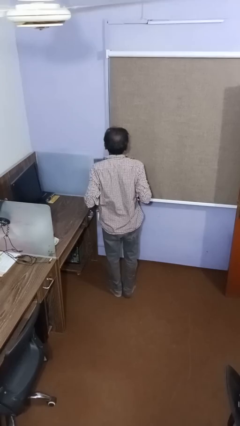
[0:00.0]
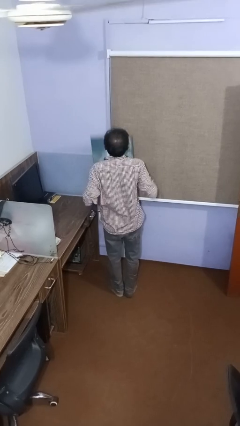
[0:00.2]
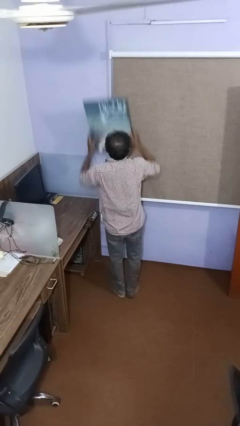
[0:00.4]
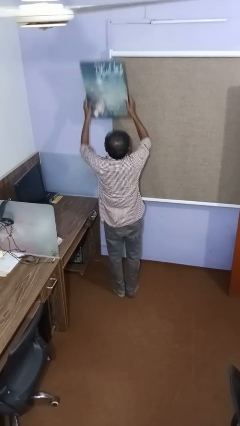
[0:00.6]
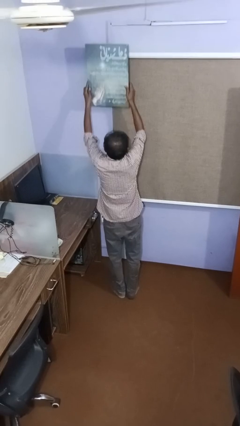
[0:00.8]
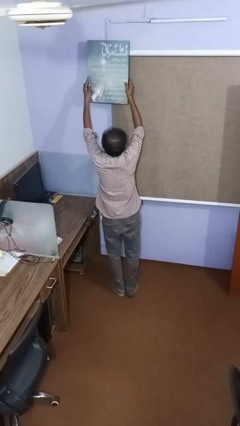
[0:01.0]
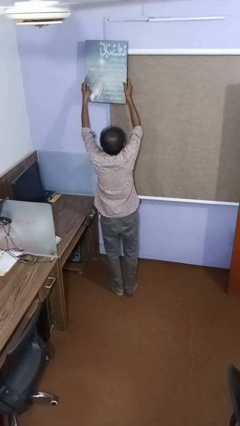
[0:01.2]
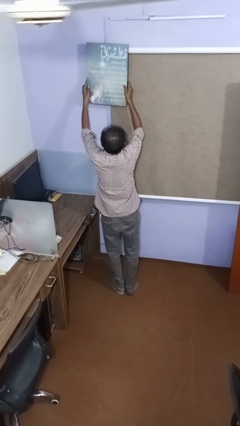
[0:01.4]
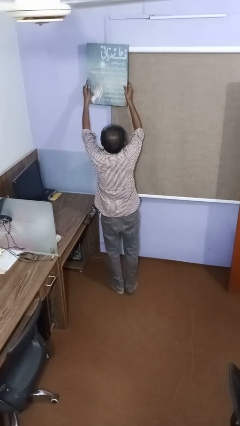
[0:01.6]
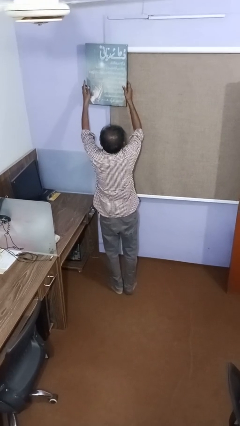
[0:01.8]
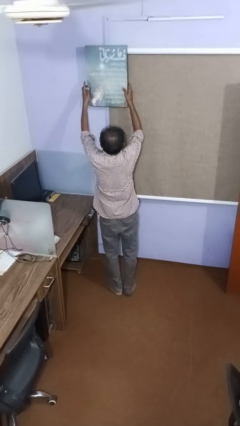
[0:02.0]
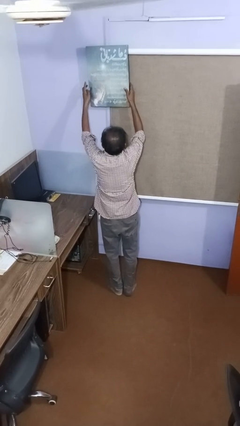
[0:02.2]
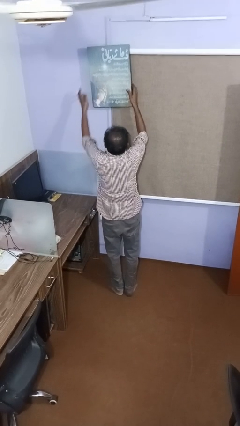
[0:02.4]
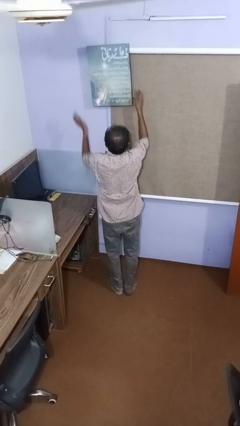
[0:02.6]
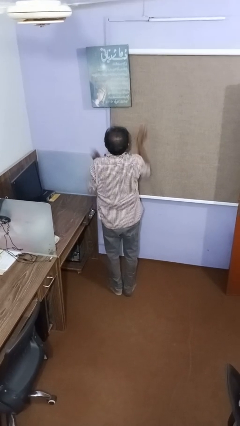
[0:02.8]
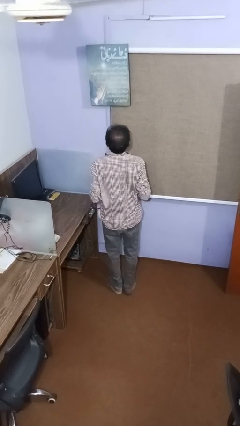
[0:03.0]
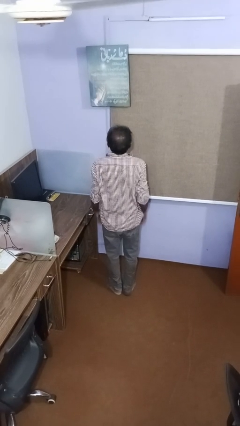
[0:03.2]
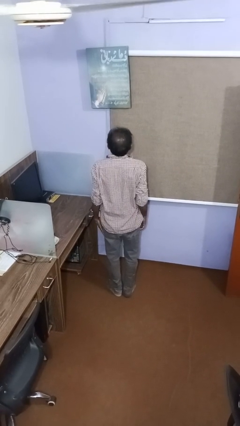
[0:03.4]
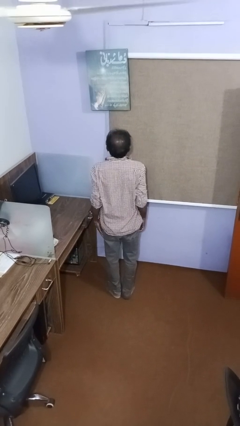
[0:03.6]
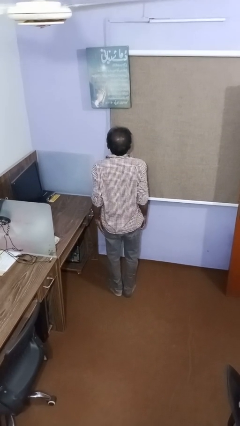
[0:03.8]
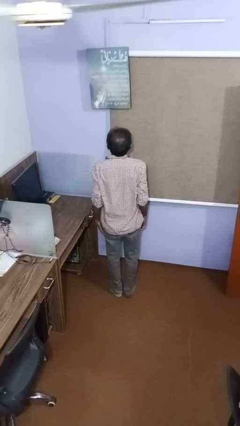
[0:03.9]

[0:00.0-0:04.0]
person puts up picture frame

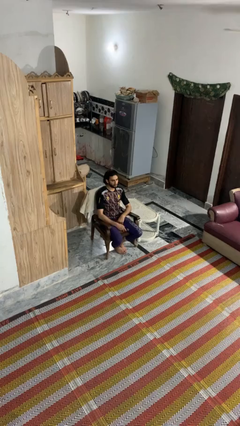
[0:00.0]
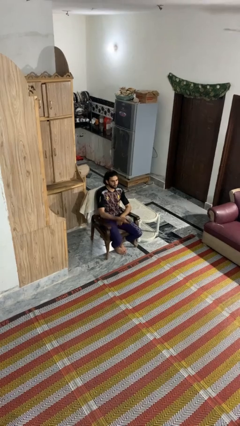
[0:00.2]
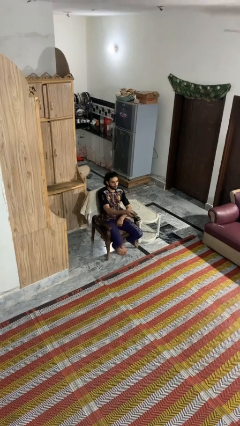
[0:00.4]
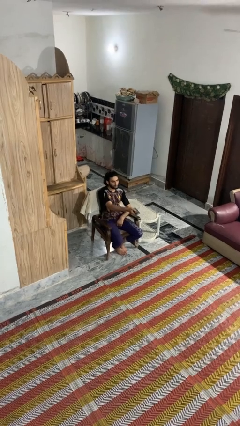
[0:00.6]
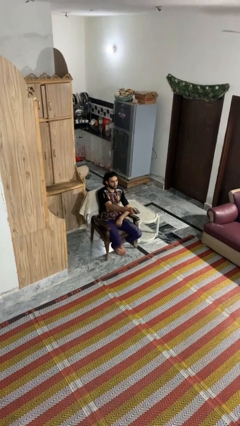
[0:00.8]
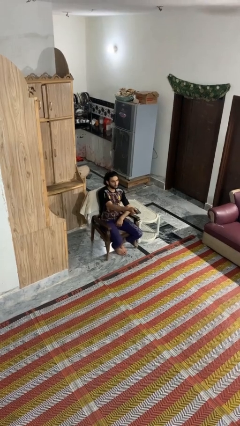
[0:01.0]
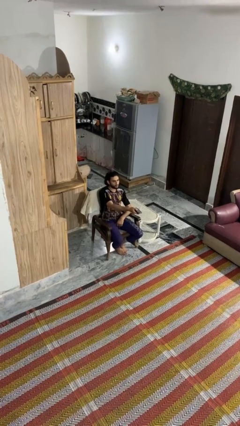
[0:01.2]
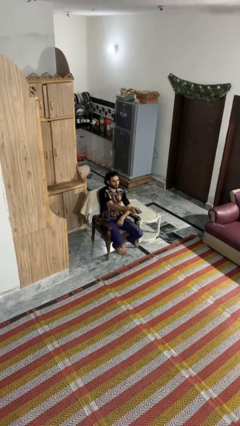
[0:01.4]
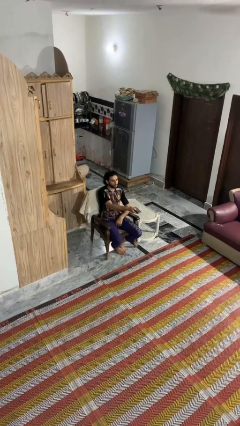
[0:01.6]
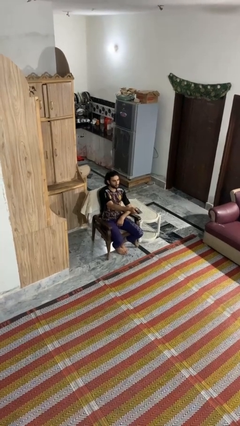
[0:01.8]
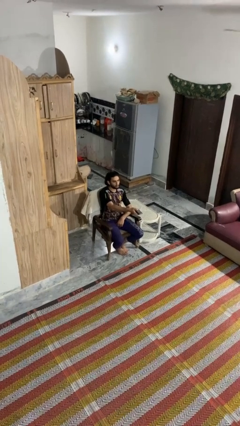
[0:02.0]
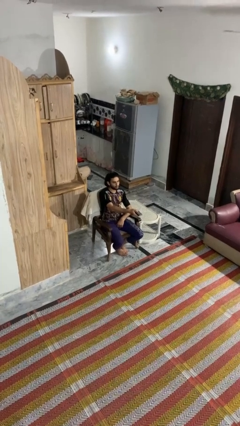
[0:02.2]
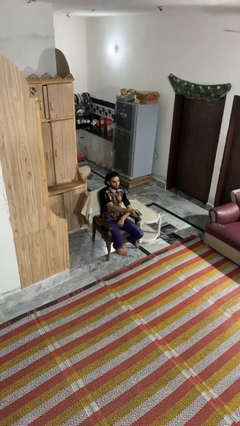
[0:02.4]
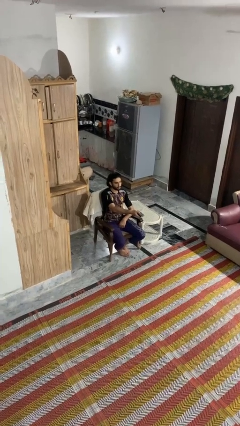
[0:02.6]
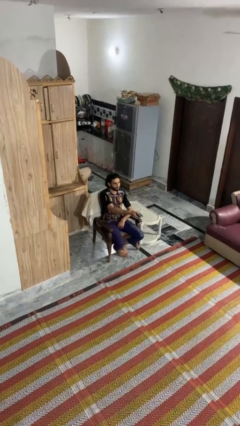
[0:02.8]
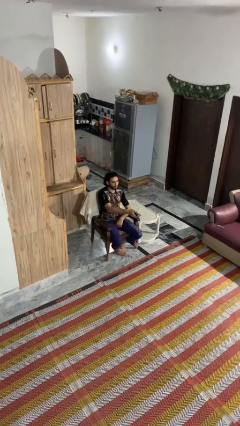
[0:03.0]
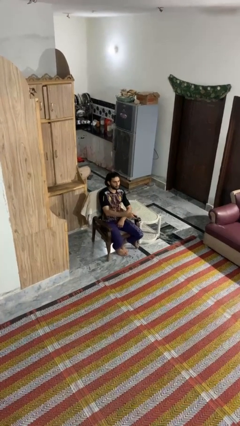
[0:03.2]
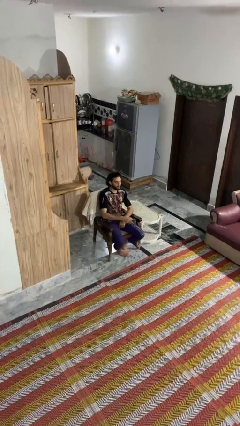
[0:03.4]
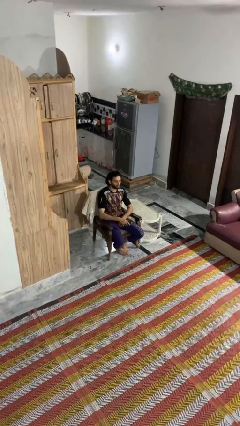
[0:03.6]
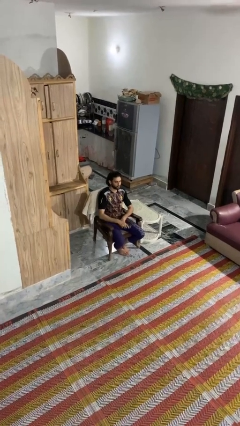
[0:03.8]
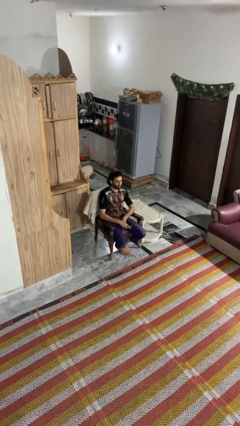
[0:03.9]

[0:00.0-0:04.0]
person uses television remote

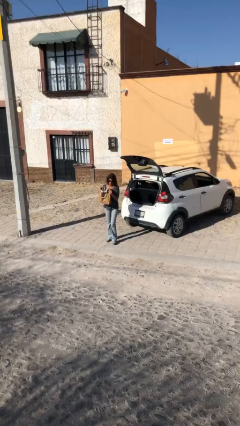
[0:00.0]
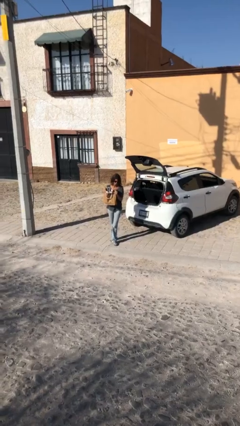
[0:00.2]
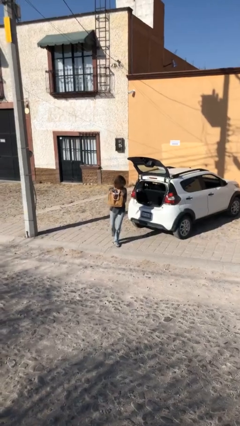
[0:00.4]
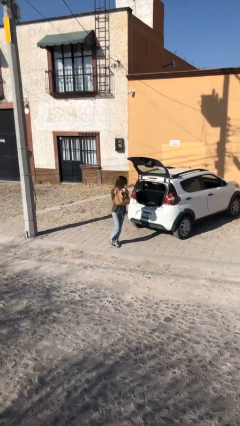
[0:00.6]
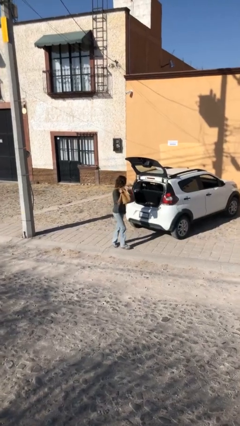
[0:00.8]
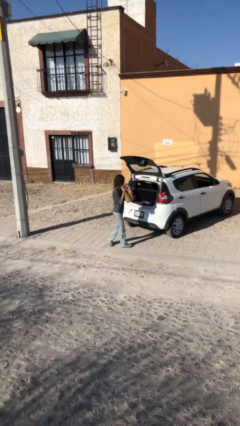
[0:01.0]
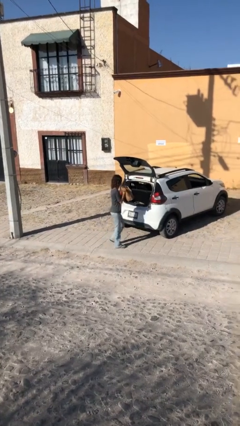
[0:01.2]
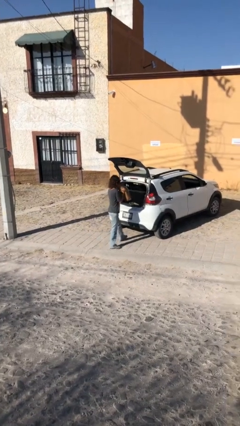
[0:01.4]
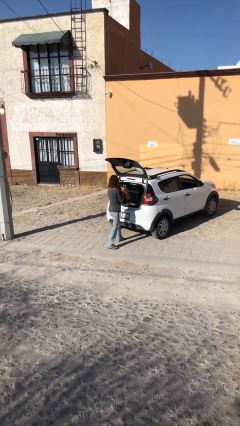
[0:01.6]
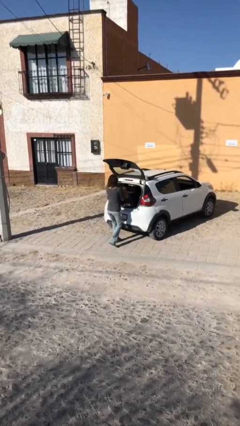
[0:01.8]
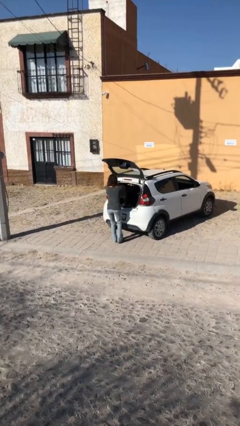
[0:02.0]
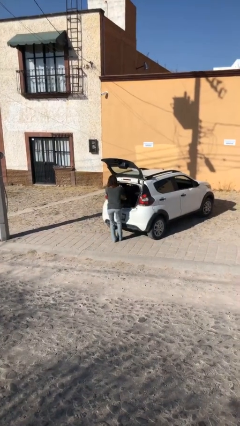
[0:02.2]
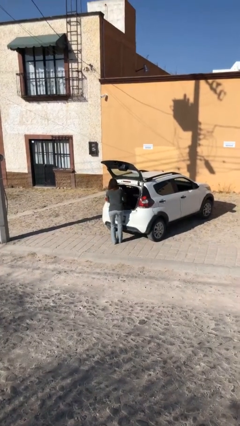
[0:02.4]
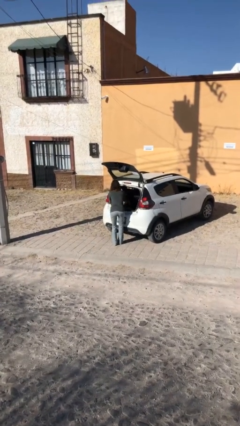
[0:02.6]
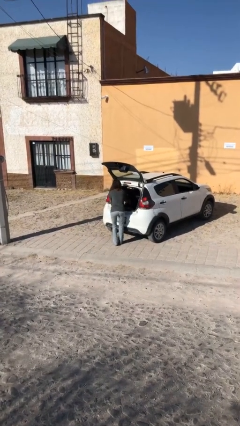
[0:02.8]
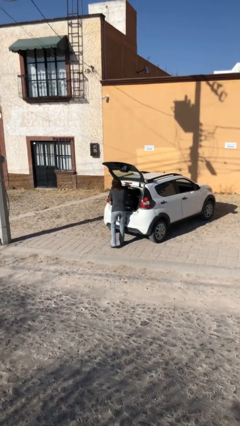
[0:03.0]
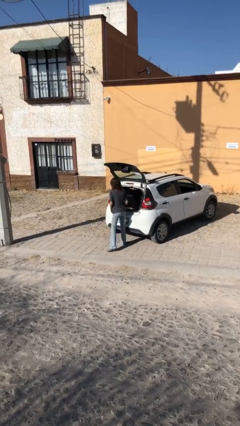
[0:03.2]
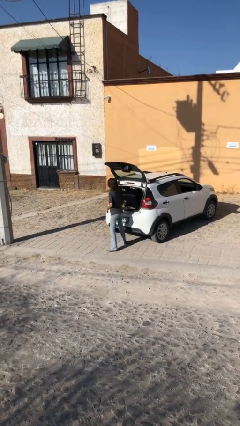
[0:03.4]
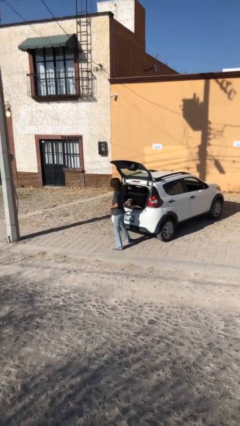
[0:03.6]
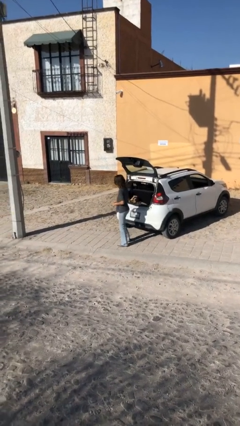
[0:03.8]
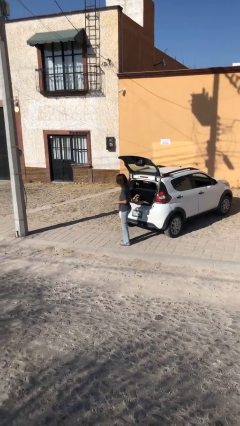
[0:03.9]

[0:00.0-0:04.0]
person loads car

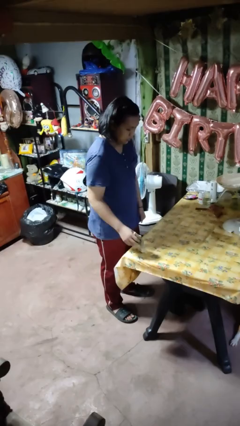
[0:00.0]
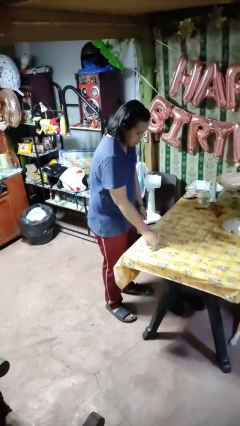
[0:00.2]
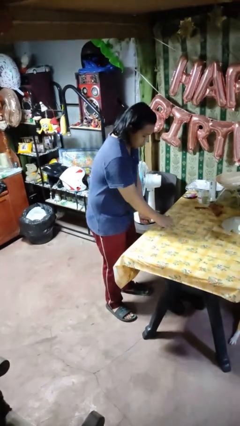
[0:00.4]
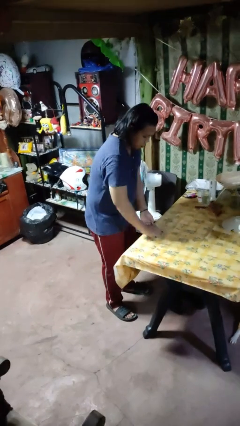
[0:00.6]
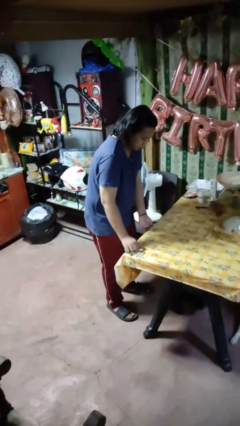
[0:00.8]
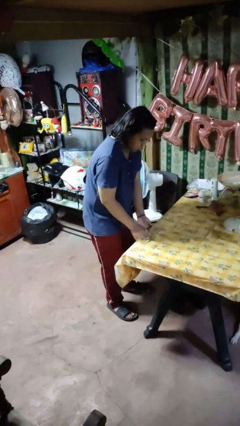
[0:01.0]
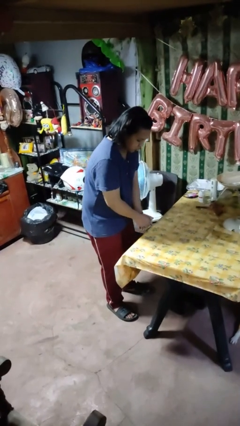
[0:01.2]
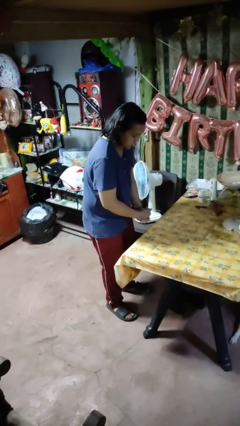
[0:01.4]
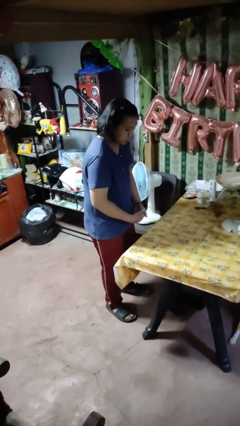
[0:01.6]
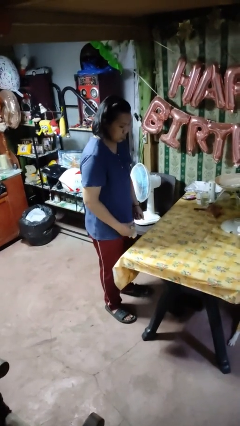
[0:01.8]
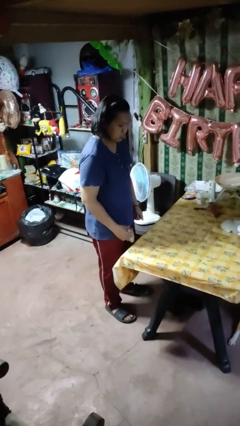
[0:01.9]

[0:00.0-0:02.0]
person cleans table with rag

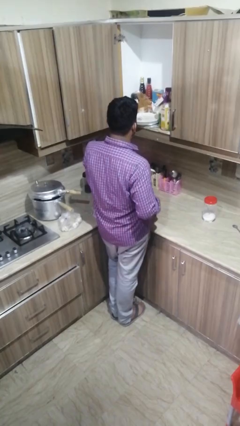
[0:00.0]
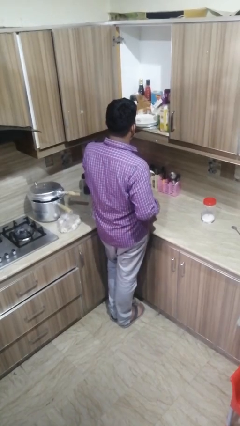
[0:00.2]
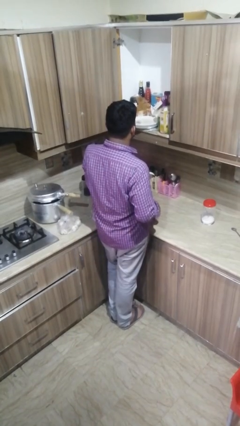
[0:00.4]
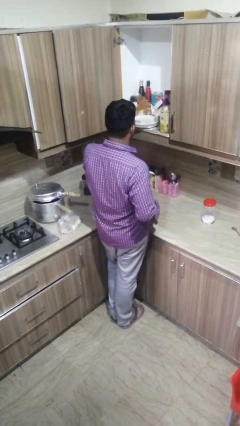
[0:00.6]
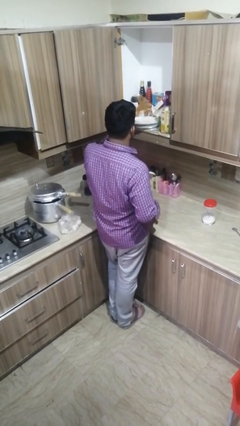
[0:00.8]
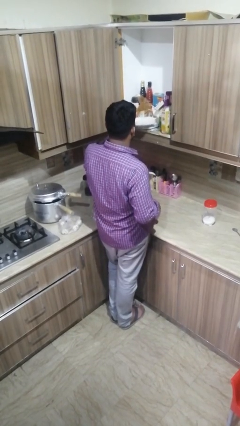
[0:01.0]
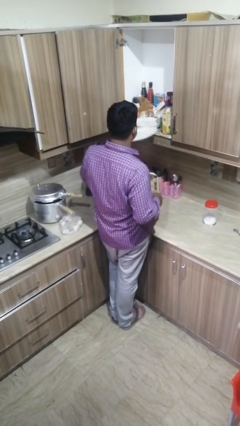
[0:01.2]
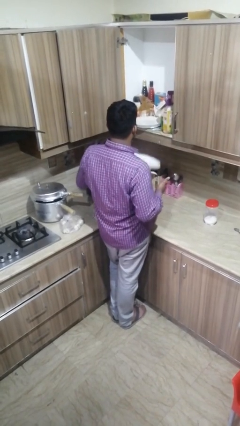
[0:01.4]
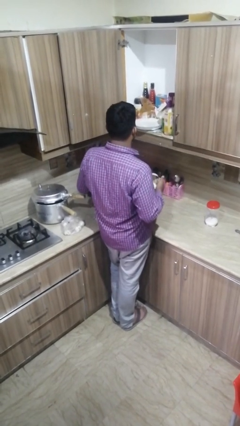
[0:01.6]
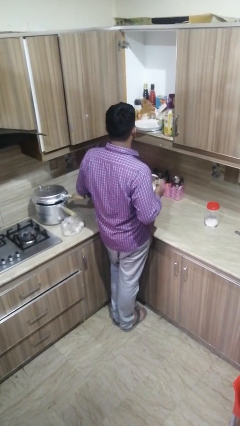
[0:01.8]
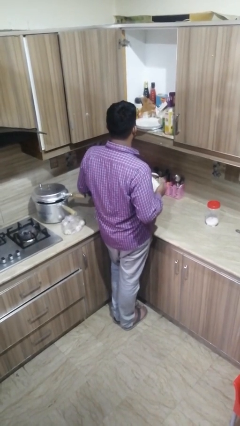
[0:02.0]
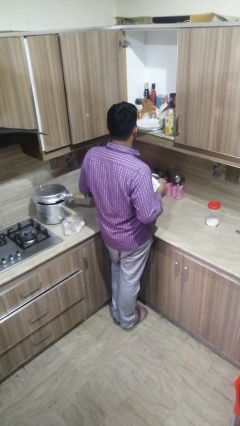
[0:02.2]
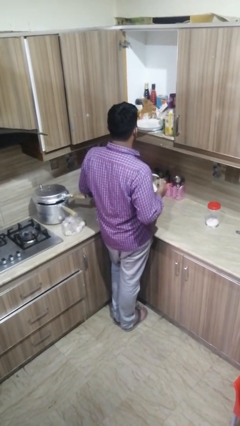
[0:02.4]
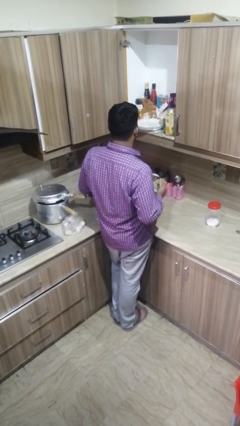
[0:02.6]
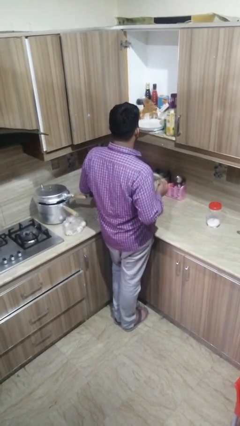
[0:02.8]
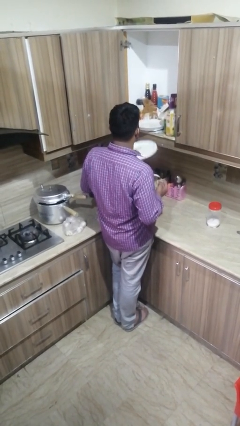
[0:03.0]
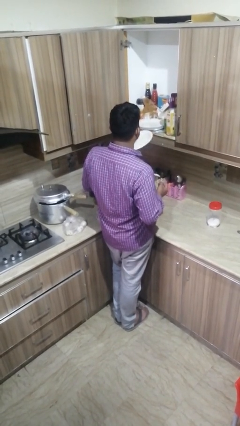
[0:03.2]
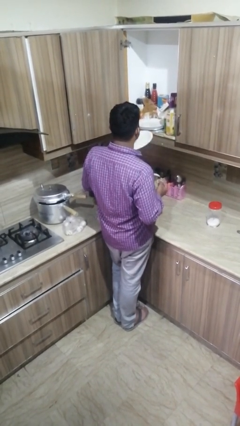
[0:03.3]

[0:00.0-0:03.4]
person takes object from cabinet
